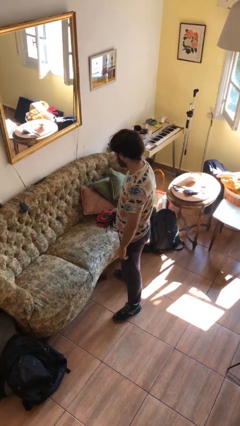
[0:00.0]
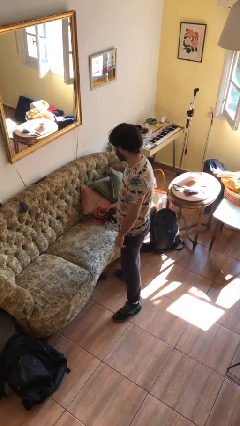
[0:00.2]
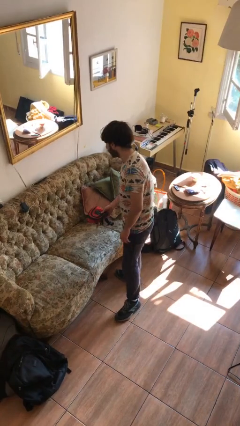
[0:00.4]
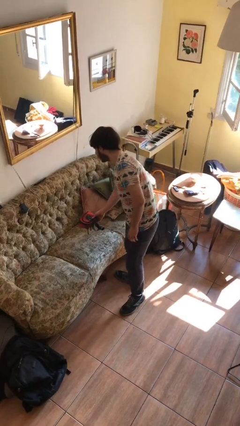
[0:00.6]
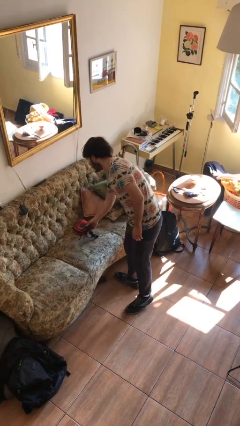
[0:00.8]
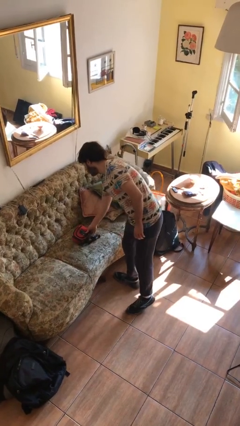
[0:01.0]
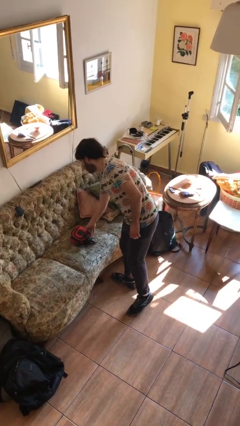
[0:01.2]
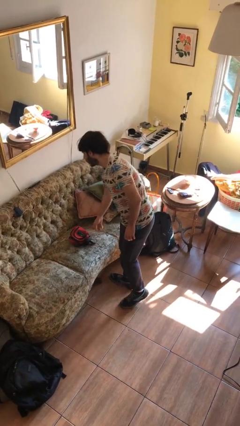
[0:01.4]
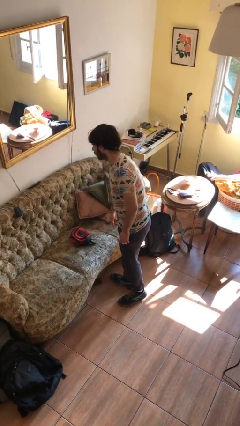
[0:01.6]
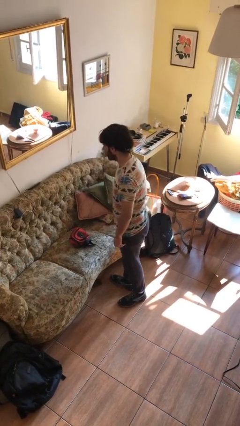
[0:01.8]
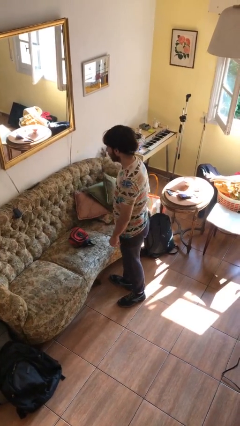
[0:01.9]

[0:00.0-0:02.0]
person puts down object on couch

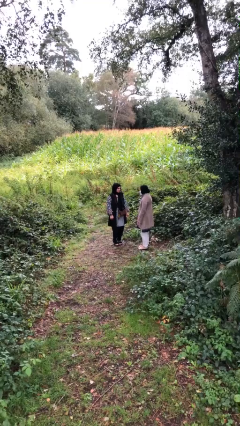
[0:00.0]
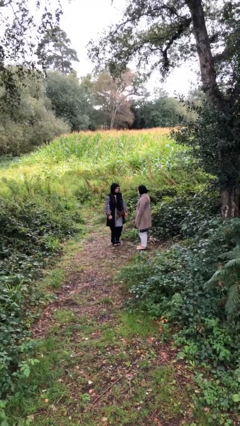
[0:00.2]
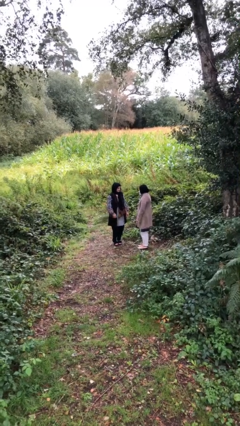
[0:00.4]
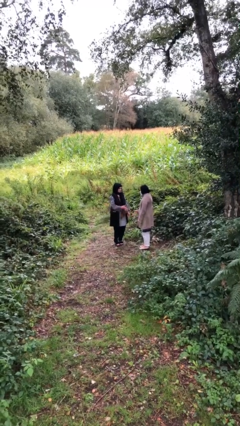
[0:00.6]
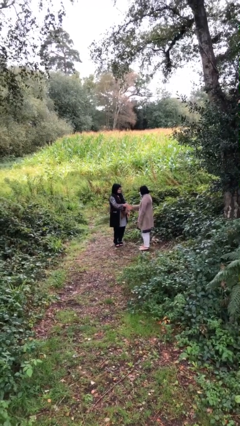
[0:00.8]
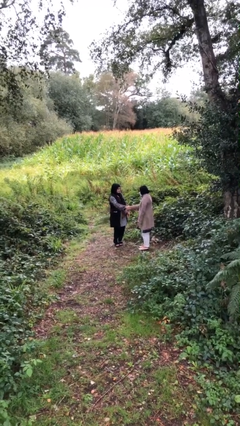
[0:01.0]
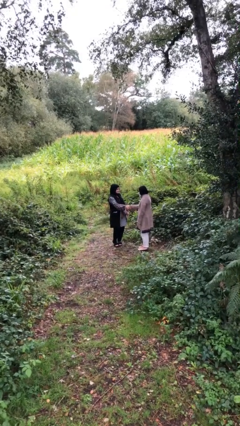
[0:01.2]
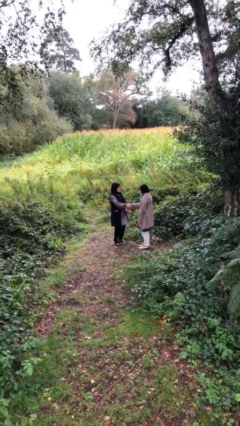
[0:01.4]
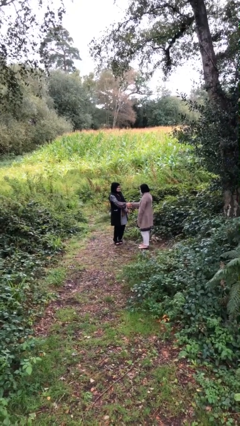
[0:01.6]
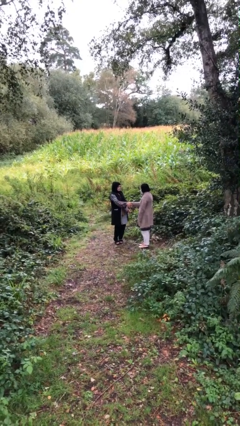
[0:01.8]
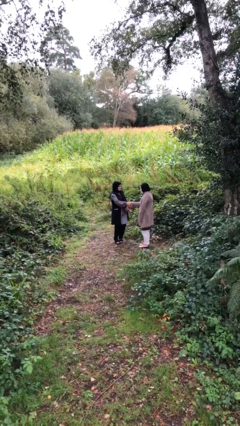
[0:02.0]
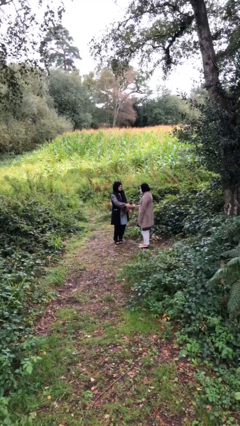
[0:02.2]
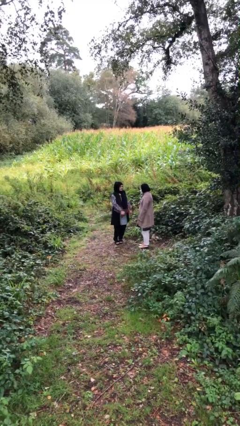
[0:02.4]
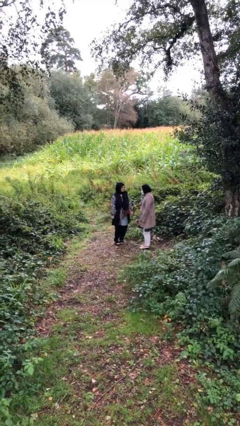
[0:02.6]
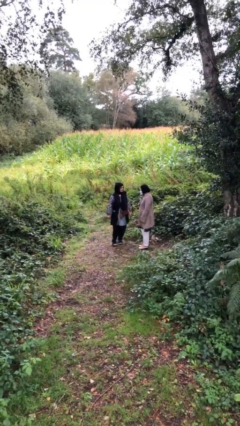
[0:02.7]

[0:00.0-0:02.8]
person shakes hand

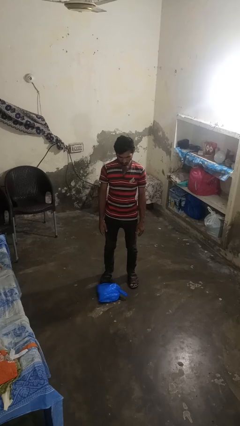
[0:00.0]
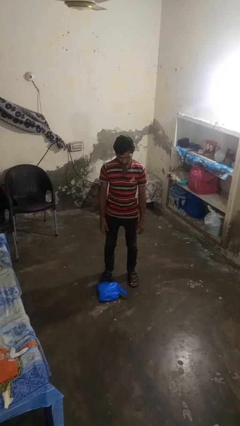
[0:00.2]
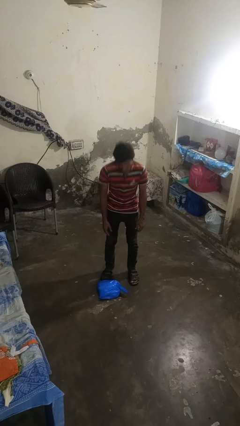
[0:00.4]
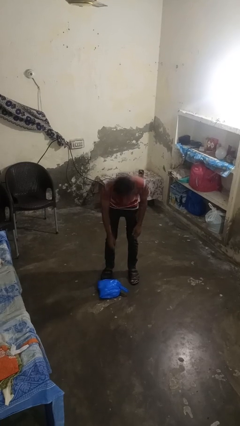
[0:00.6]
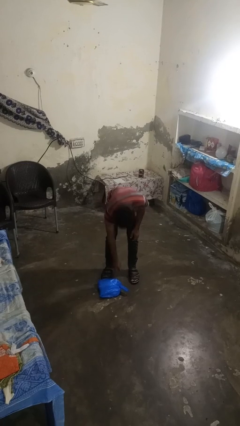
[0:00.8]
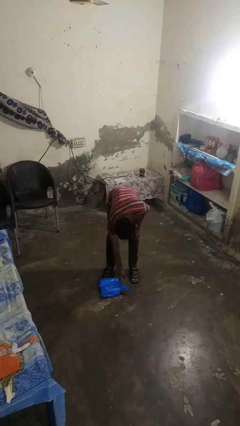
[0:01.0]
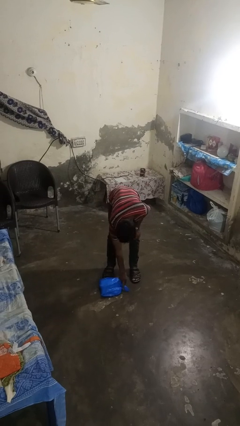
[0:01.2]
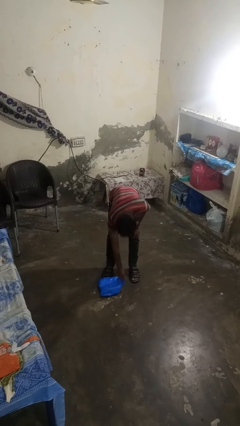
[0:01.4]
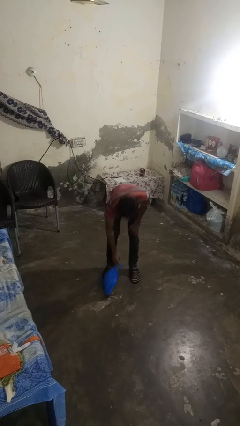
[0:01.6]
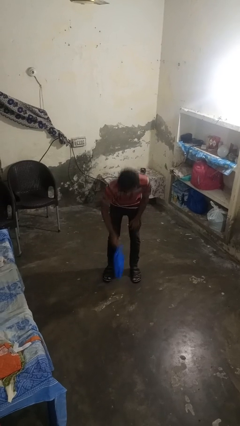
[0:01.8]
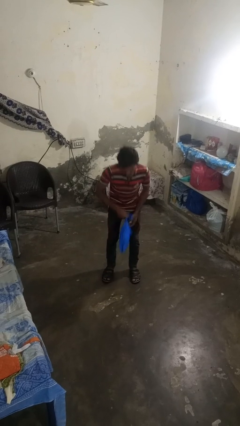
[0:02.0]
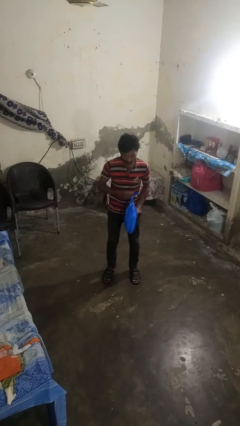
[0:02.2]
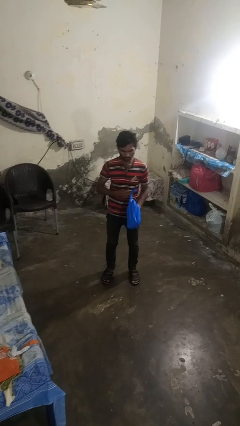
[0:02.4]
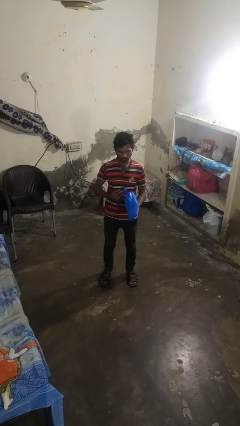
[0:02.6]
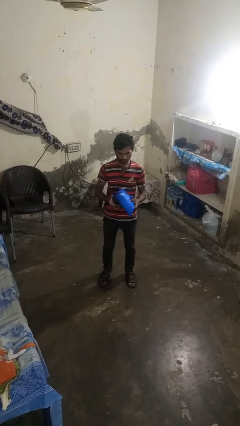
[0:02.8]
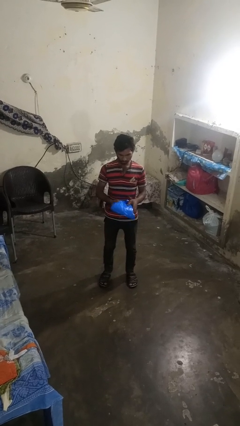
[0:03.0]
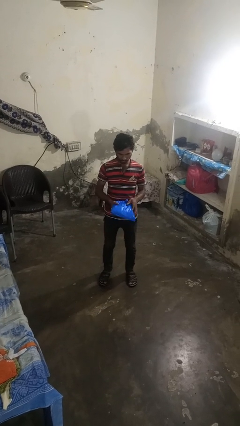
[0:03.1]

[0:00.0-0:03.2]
person picks up object from floor

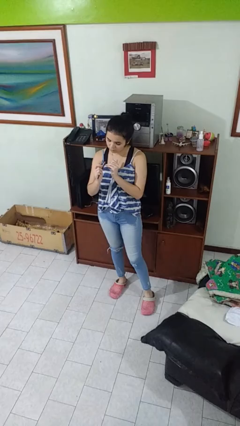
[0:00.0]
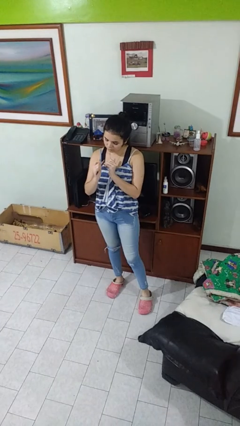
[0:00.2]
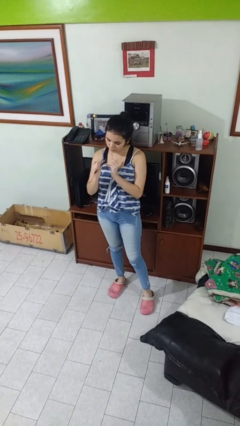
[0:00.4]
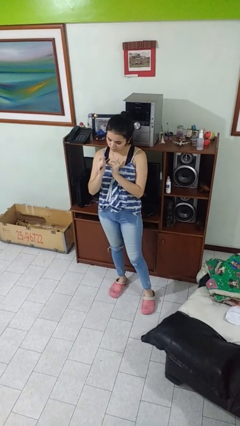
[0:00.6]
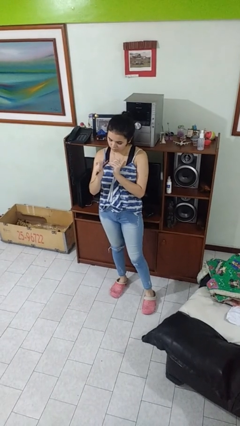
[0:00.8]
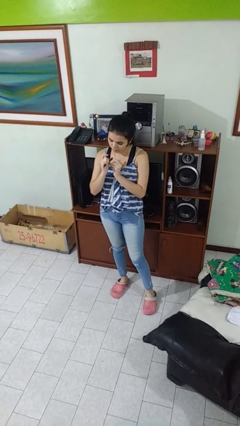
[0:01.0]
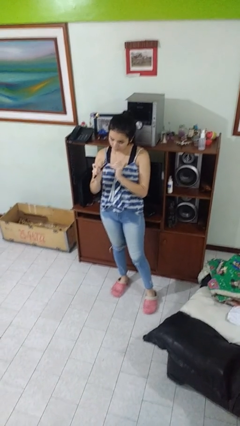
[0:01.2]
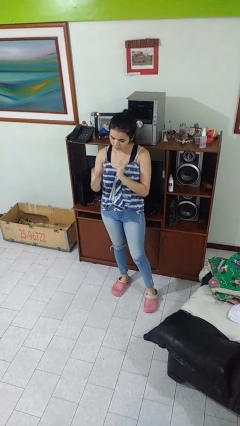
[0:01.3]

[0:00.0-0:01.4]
person files fingernails

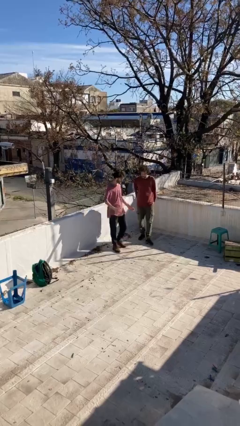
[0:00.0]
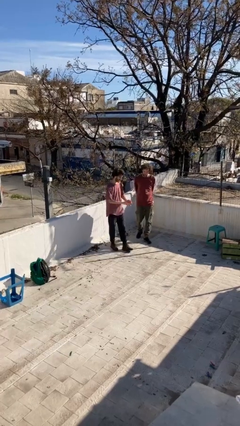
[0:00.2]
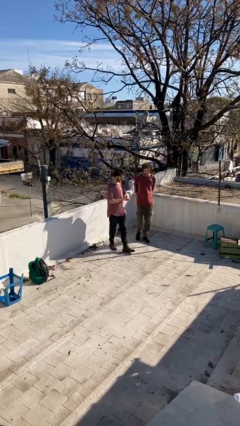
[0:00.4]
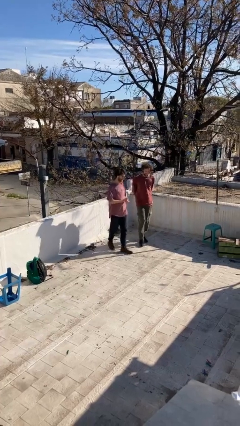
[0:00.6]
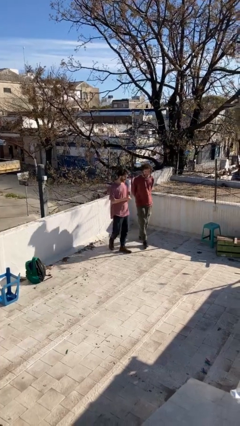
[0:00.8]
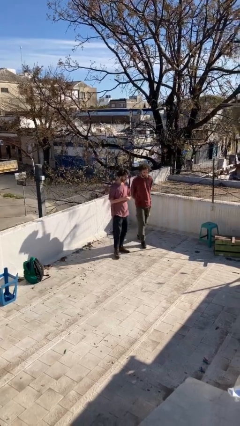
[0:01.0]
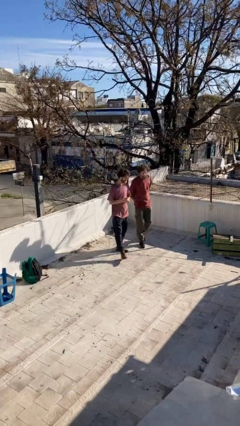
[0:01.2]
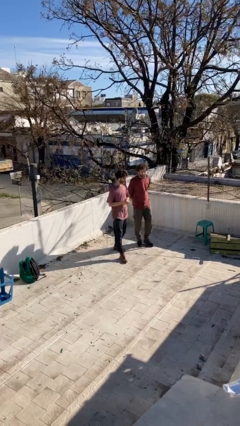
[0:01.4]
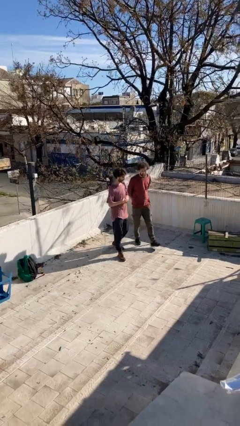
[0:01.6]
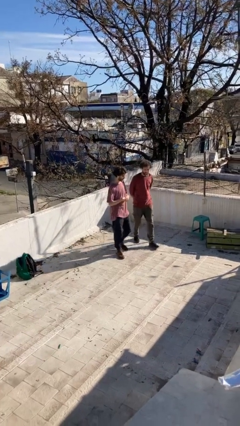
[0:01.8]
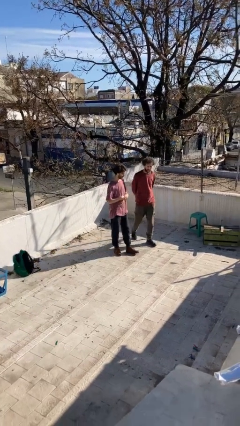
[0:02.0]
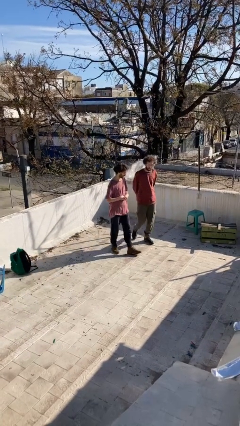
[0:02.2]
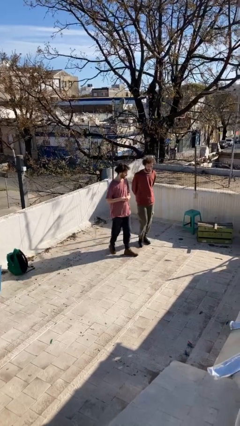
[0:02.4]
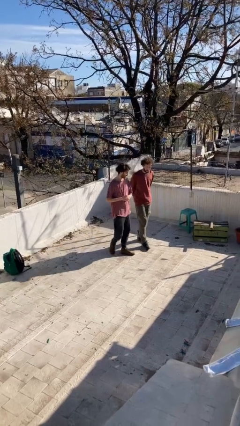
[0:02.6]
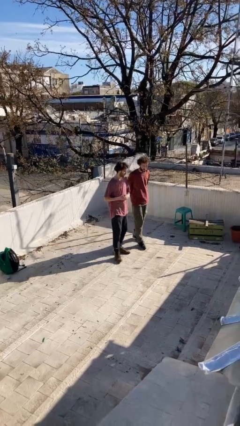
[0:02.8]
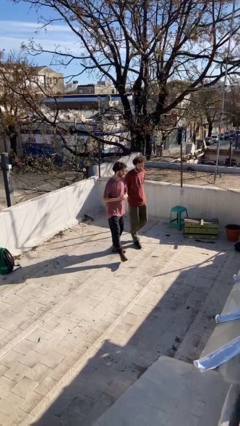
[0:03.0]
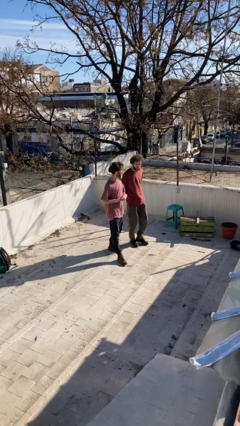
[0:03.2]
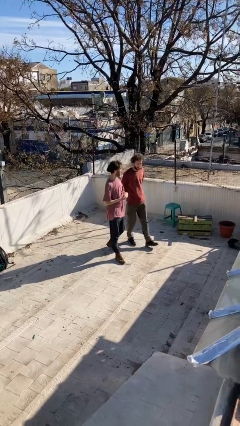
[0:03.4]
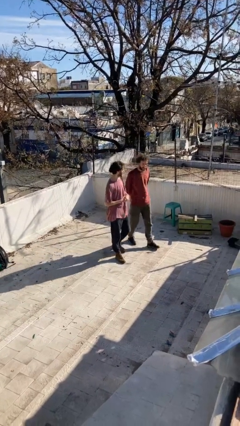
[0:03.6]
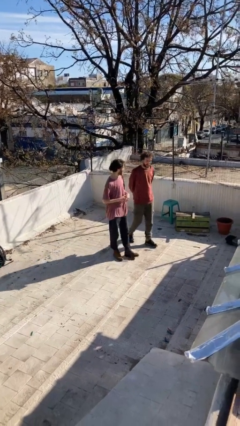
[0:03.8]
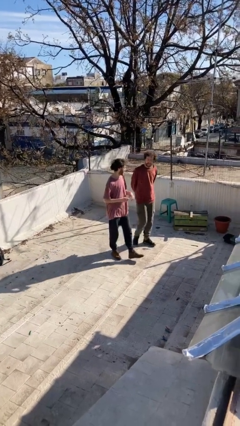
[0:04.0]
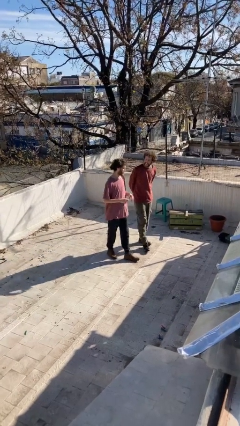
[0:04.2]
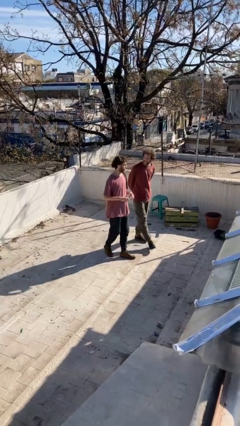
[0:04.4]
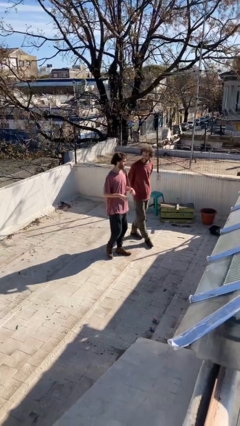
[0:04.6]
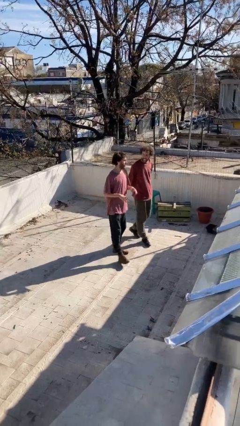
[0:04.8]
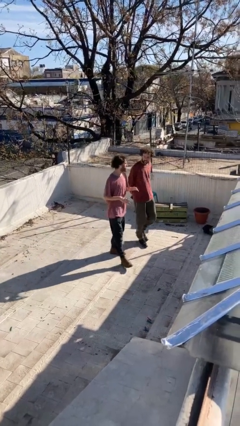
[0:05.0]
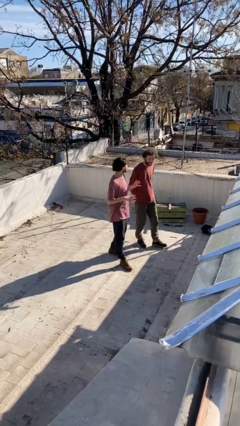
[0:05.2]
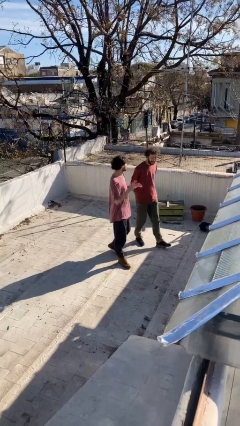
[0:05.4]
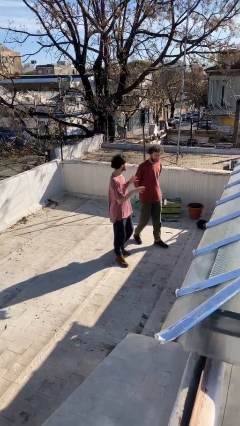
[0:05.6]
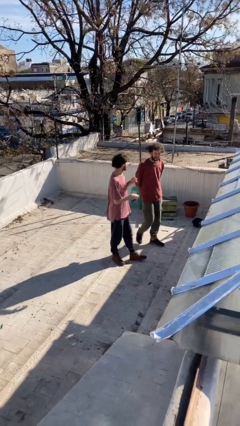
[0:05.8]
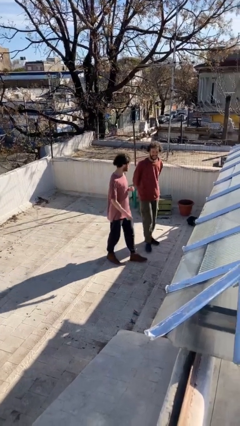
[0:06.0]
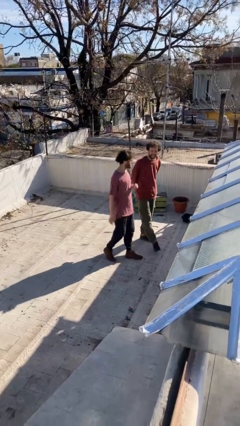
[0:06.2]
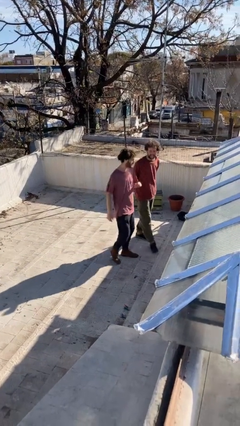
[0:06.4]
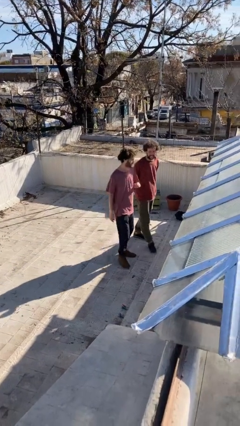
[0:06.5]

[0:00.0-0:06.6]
person talks to person

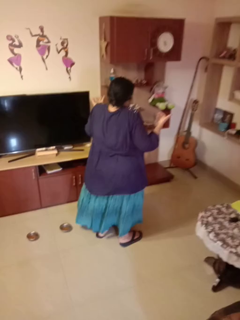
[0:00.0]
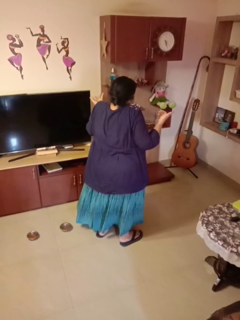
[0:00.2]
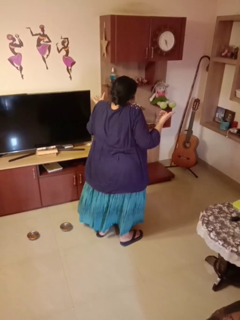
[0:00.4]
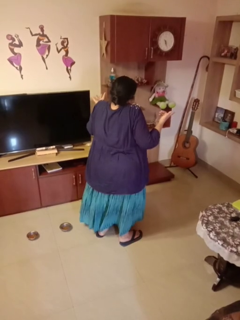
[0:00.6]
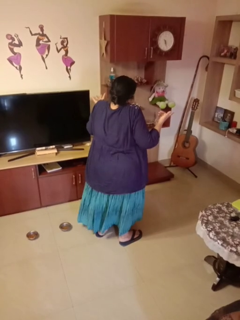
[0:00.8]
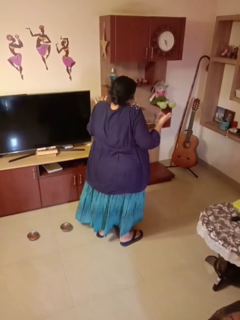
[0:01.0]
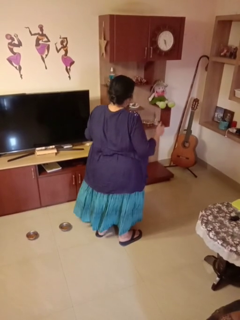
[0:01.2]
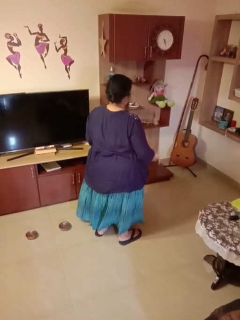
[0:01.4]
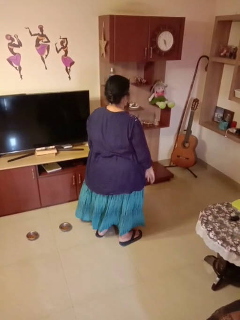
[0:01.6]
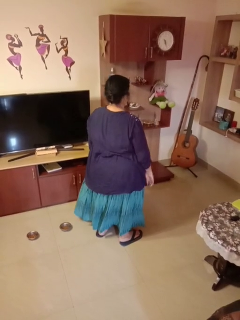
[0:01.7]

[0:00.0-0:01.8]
person shrugs
